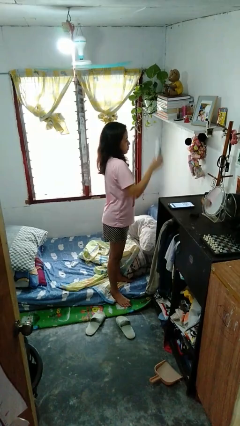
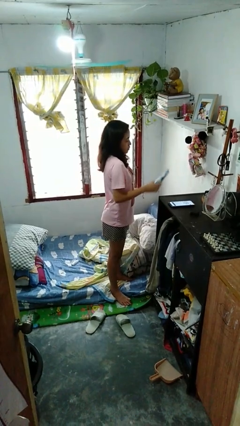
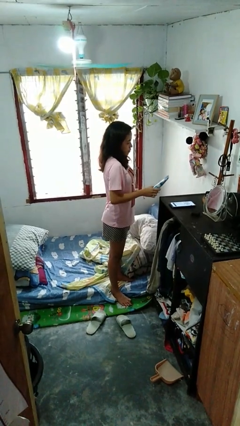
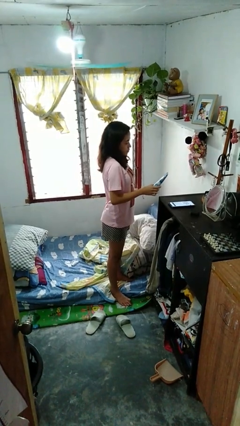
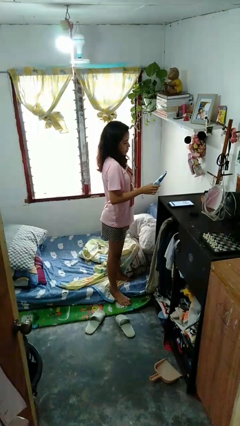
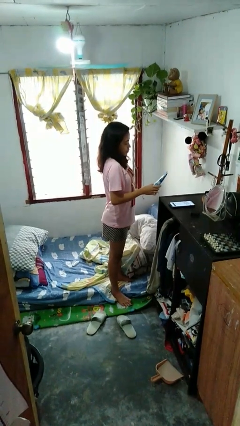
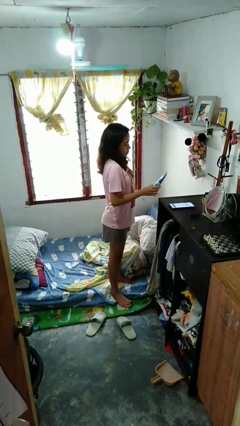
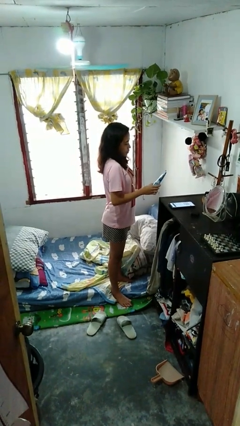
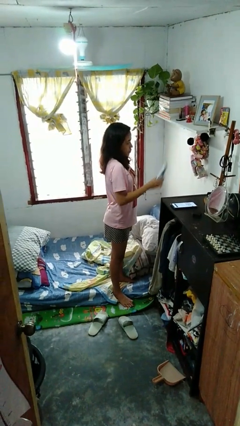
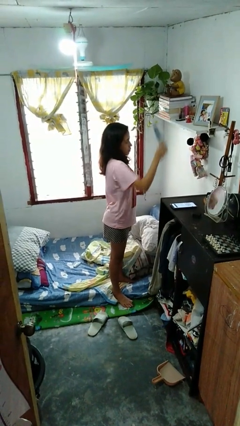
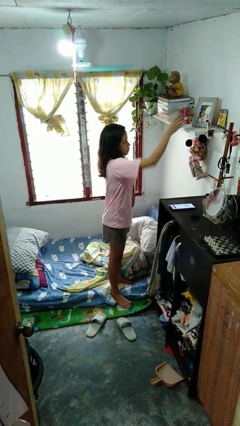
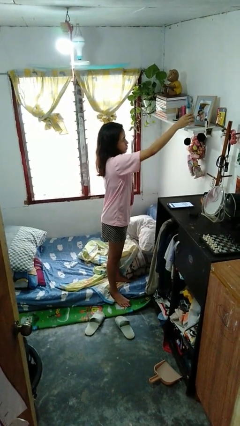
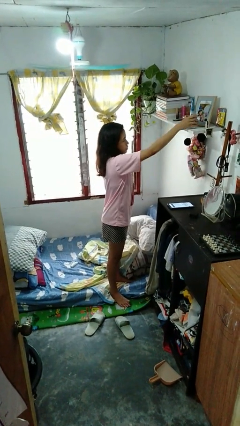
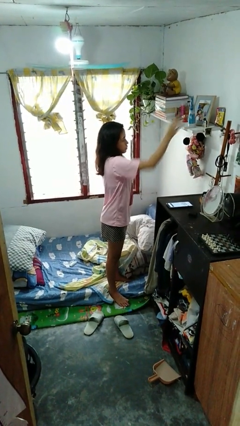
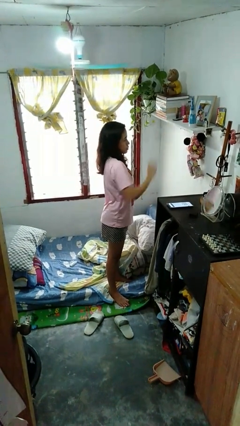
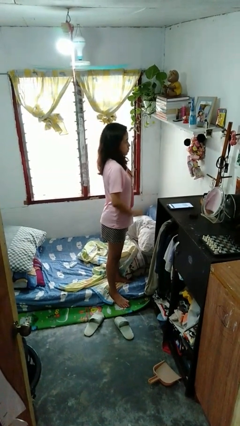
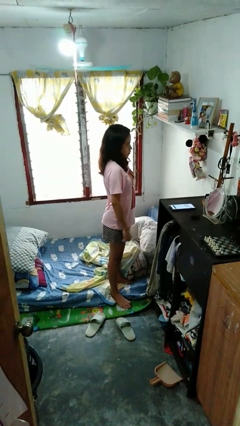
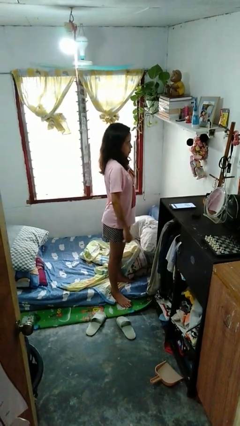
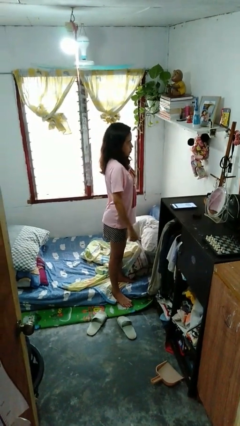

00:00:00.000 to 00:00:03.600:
person applies foundation makeup

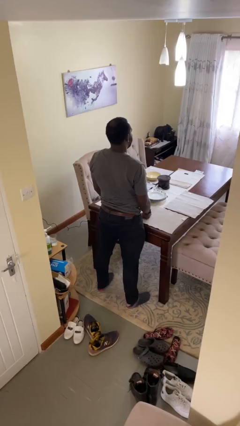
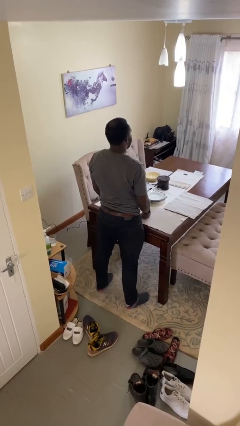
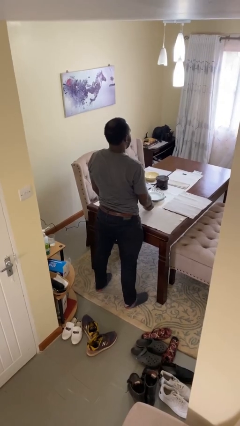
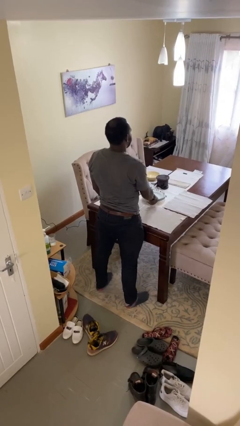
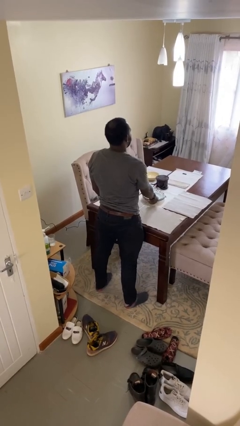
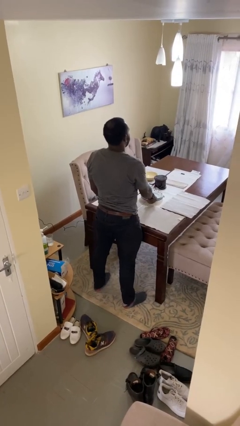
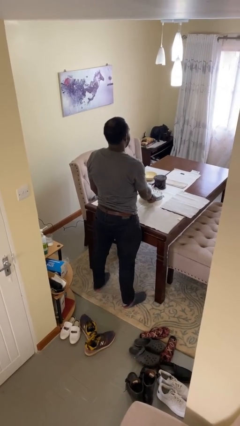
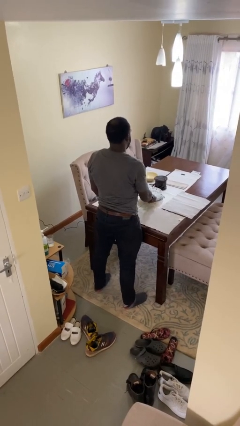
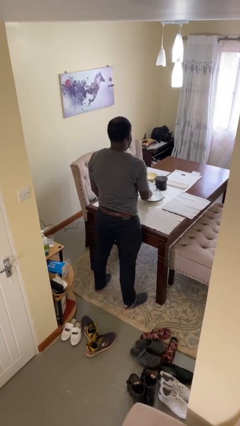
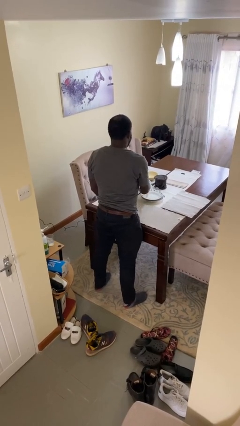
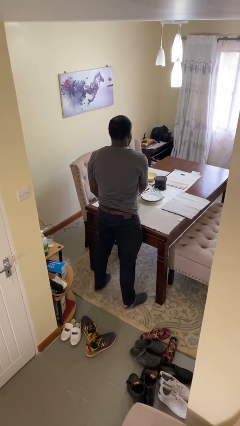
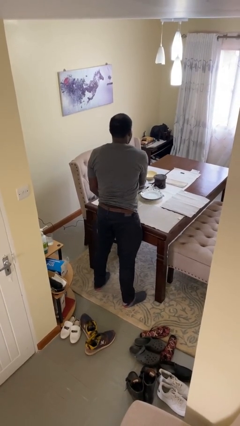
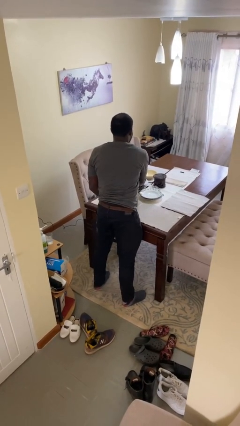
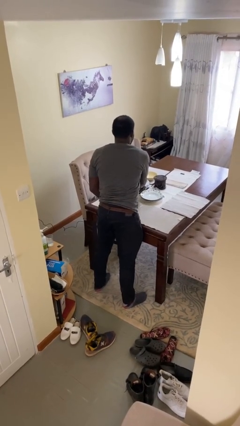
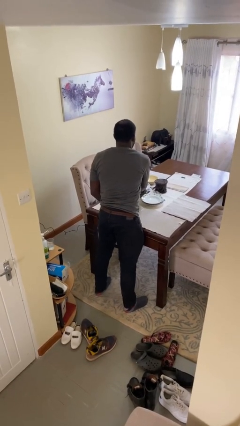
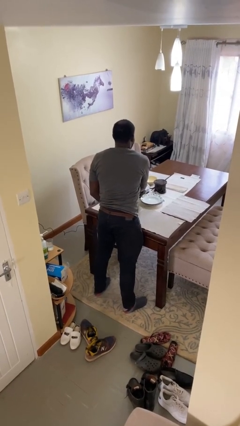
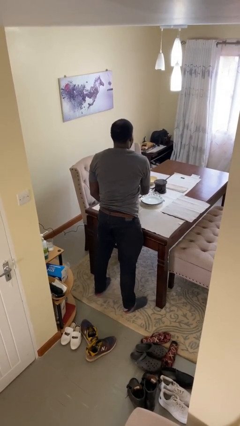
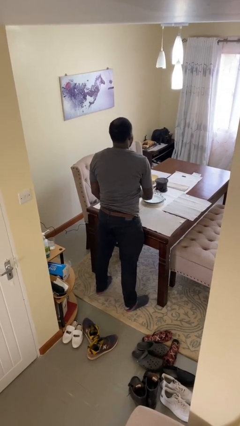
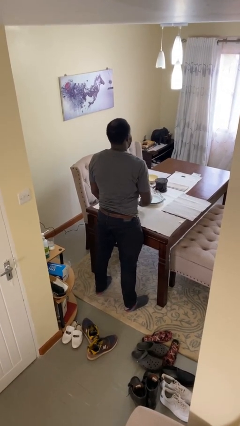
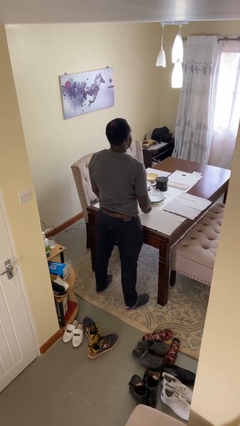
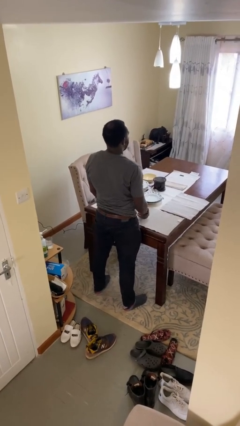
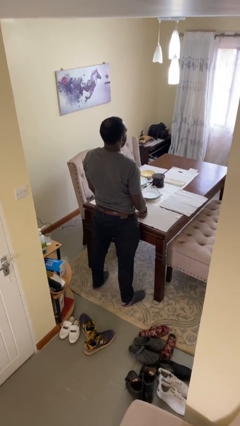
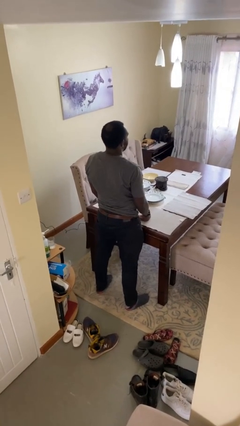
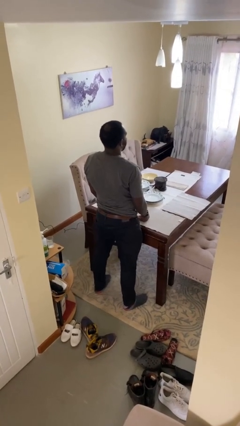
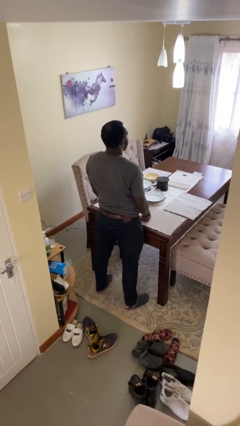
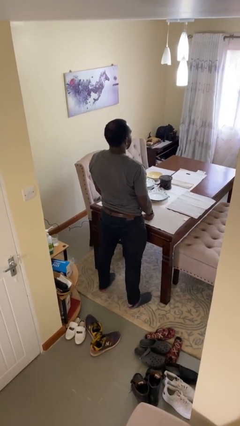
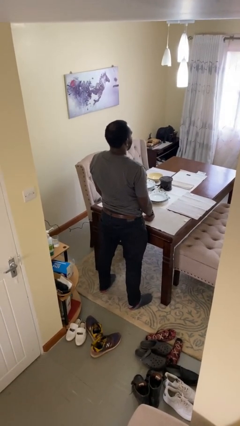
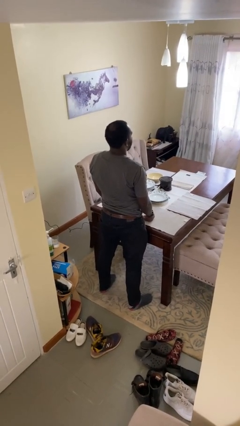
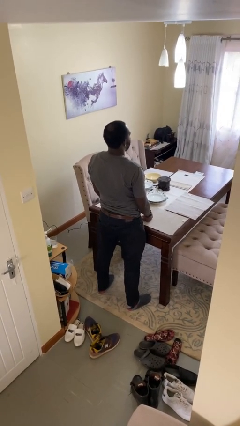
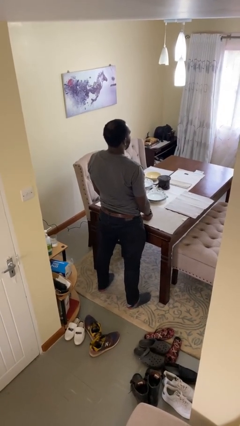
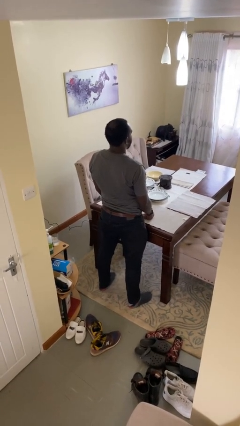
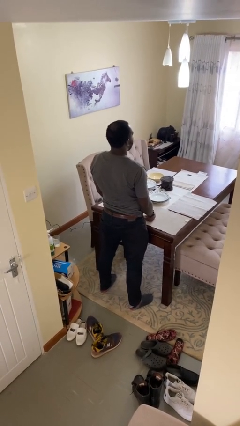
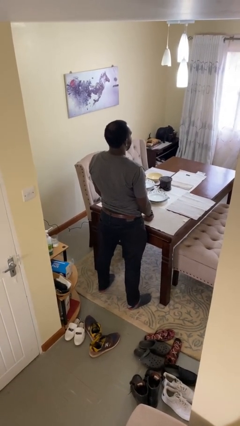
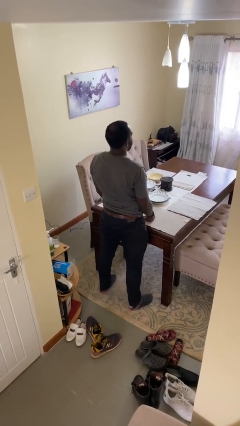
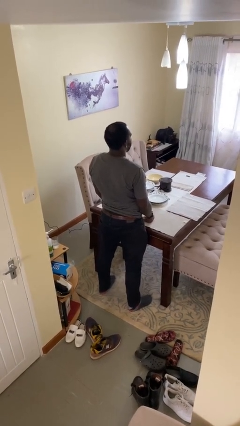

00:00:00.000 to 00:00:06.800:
person sets table

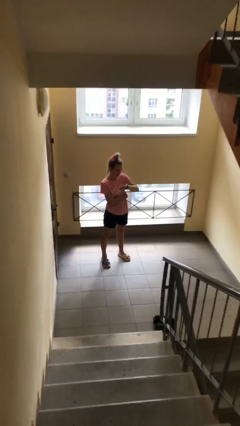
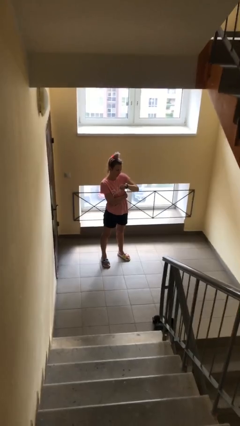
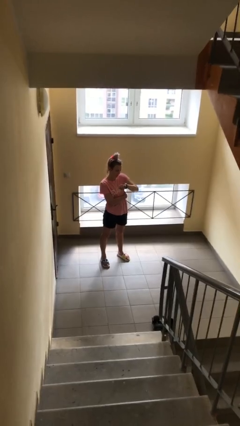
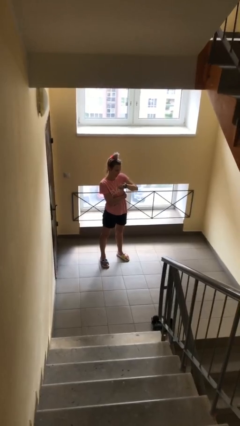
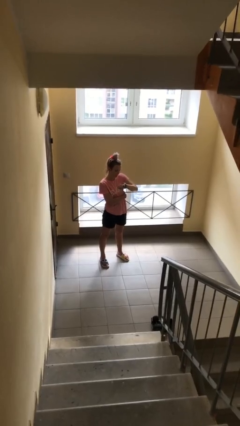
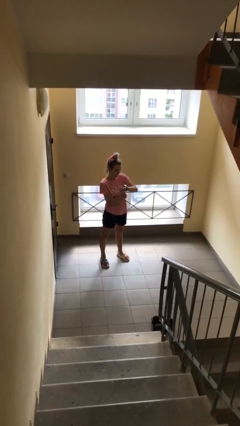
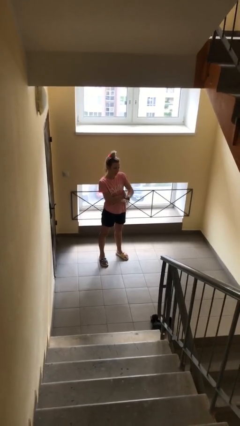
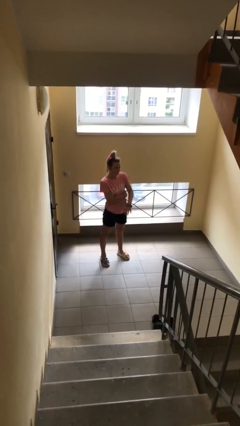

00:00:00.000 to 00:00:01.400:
person looks at wristwatch

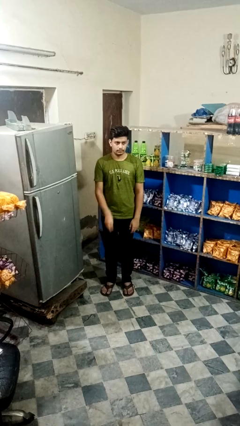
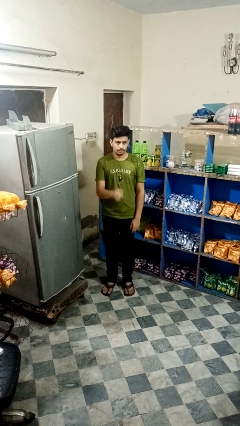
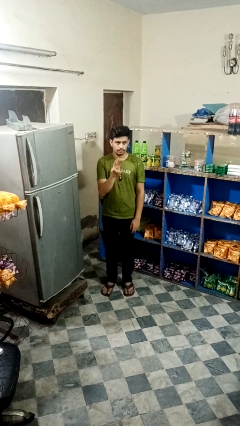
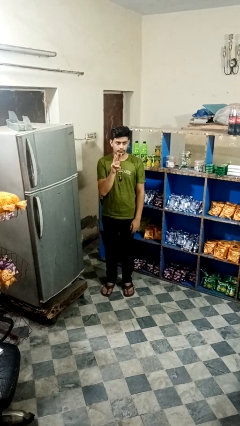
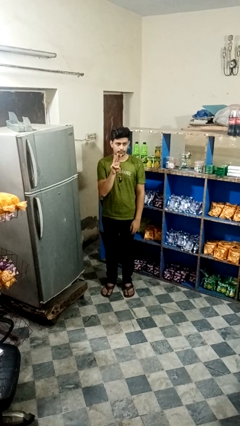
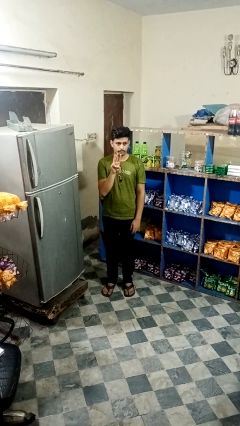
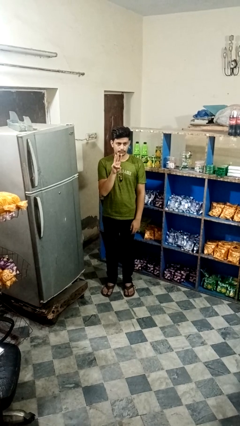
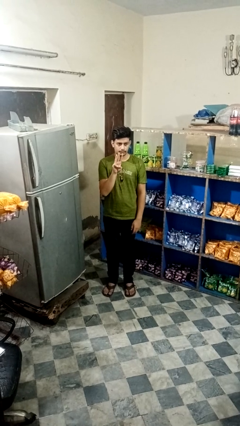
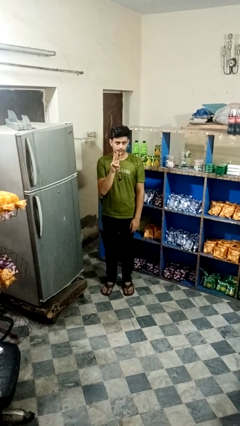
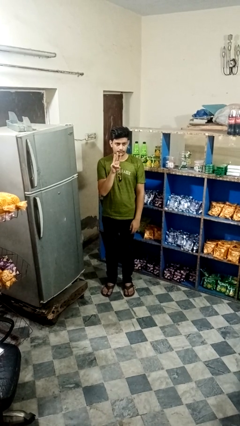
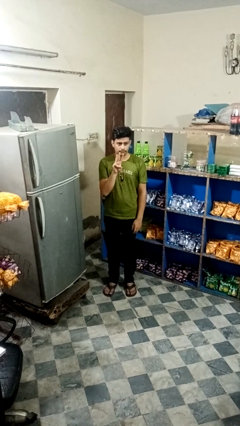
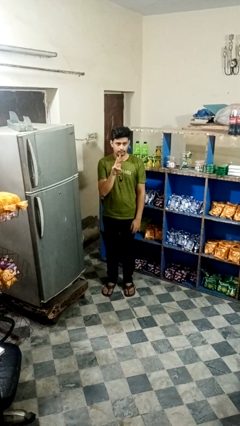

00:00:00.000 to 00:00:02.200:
person gestures number three

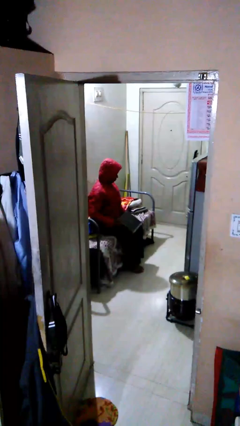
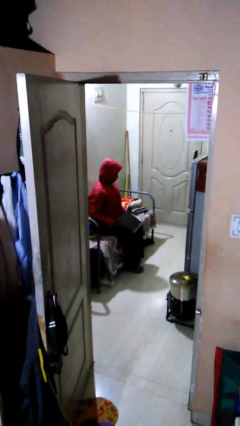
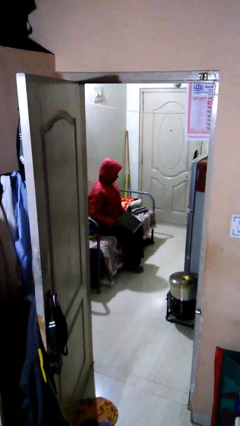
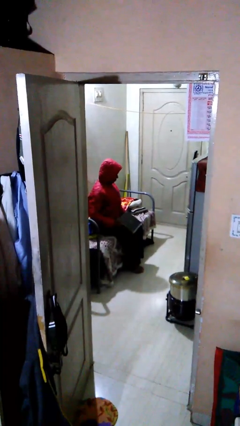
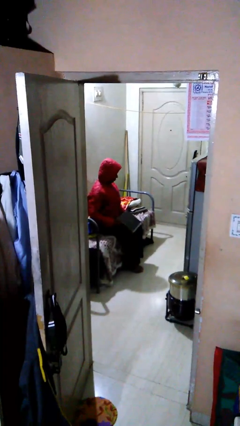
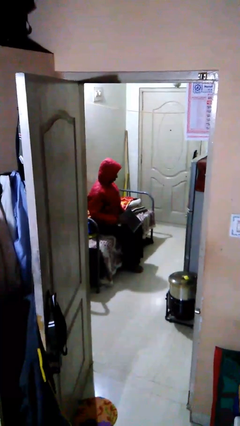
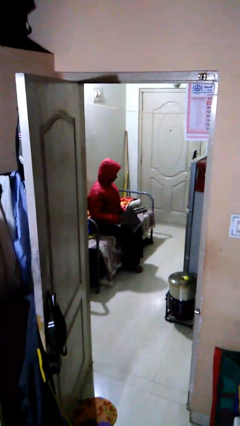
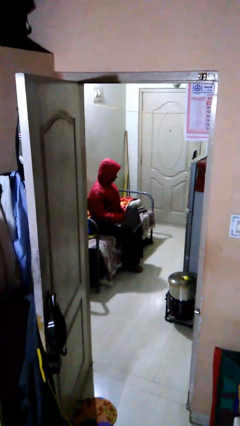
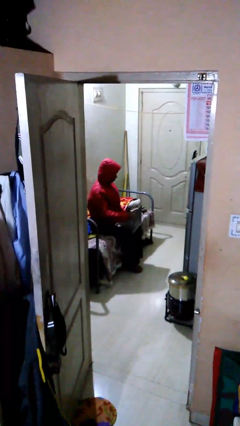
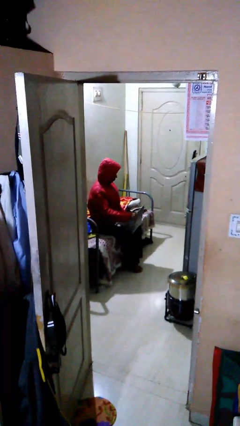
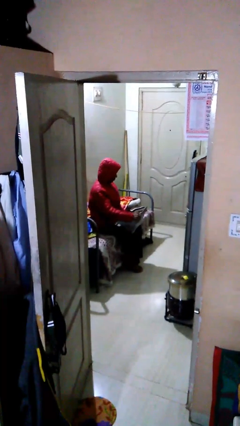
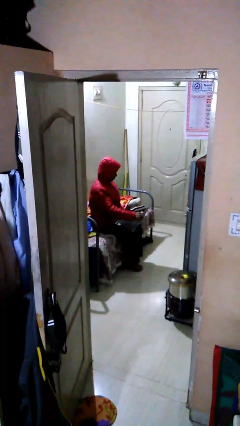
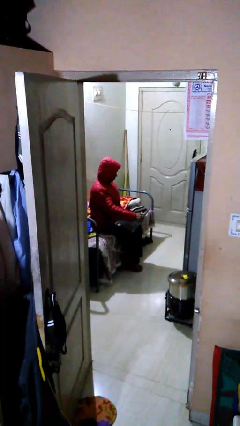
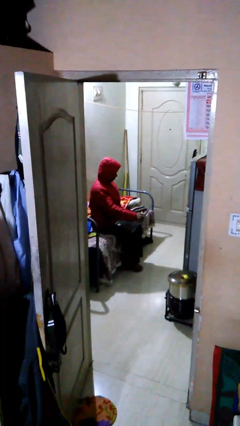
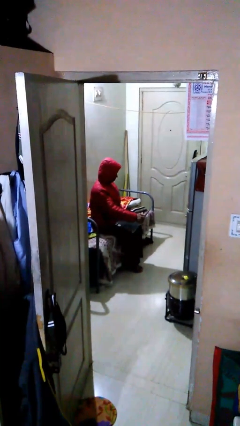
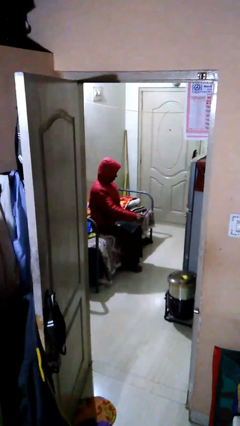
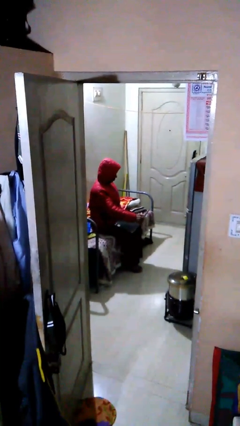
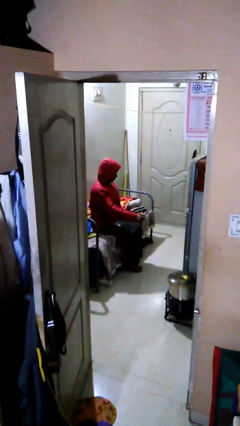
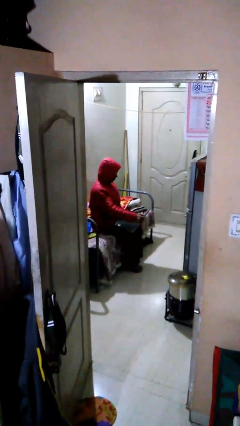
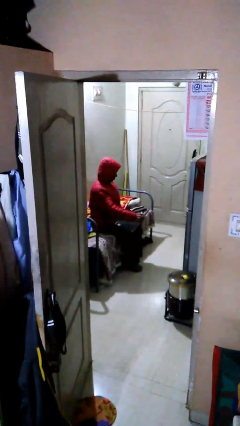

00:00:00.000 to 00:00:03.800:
person interacts with laptop
